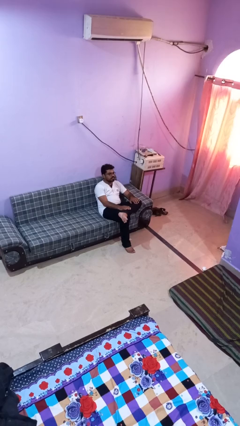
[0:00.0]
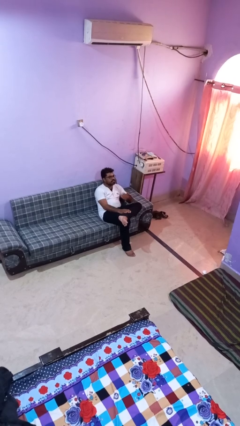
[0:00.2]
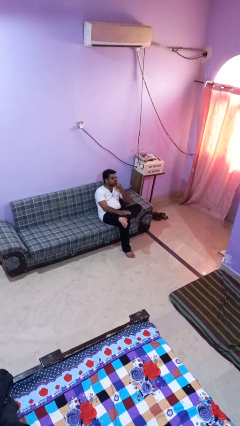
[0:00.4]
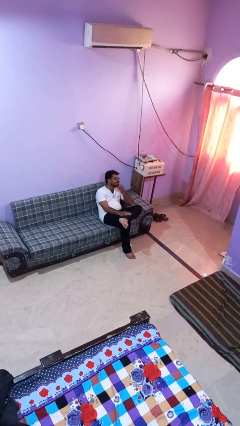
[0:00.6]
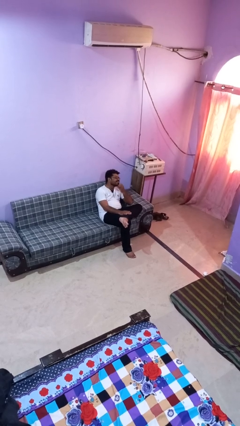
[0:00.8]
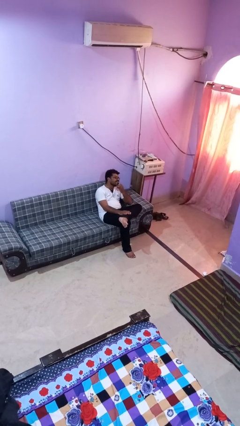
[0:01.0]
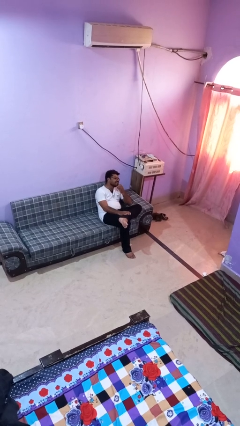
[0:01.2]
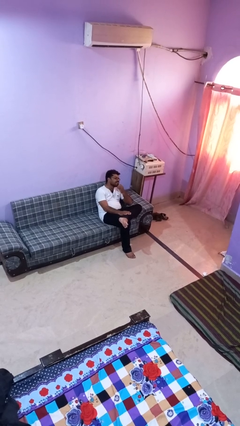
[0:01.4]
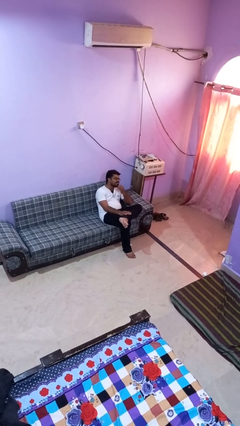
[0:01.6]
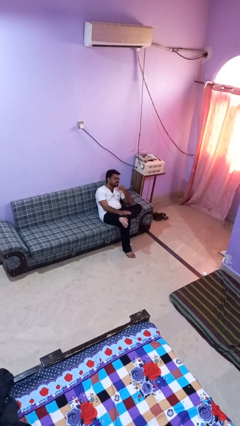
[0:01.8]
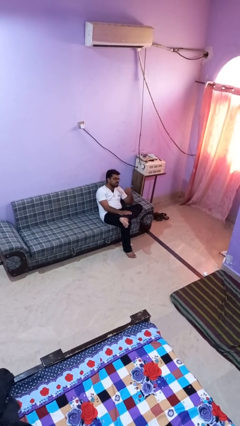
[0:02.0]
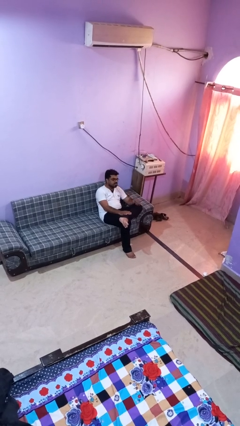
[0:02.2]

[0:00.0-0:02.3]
person strokes chin

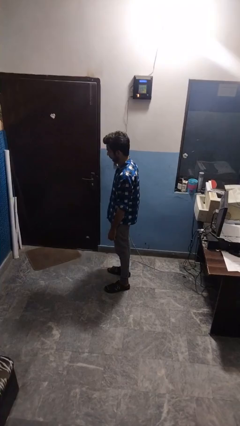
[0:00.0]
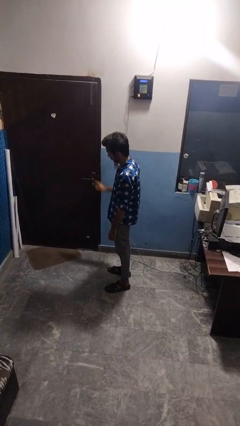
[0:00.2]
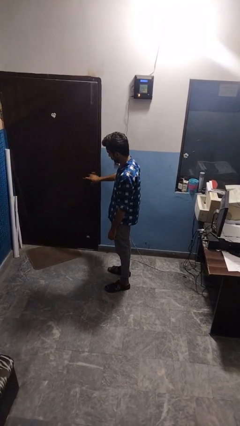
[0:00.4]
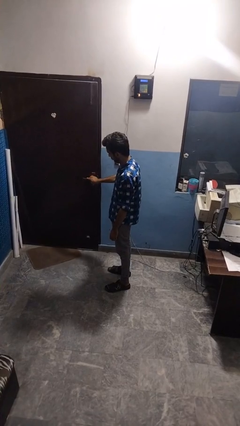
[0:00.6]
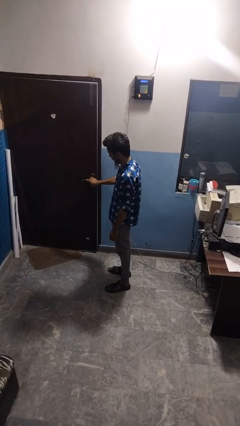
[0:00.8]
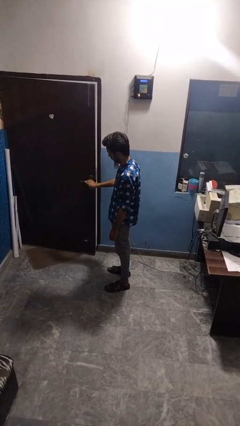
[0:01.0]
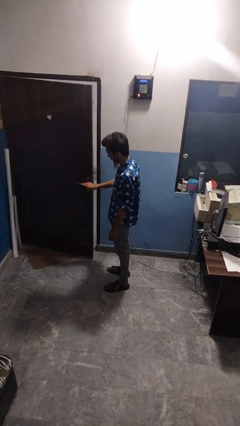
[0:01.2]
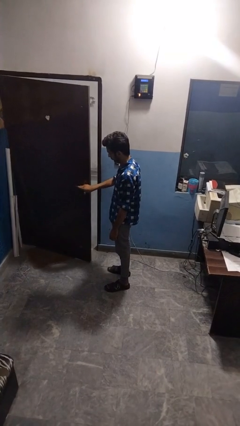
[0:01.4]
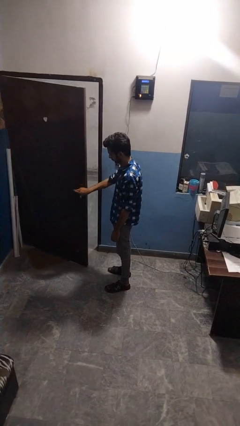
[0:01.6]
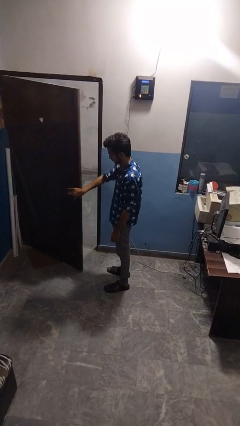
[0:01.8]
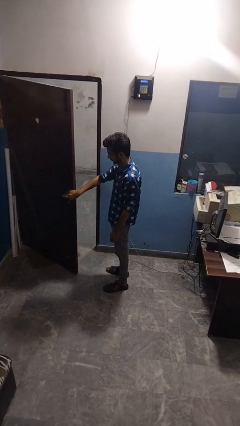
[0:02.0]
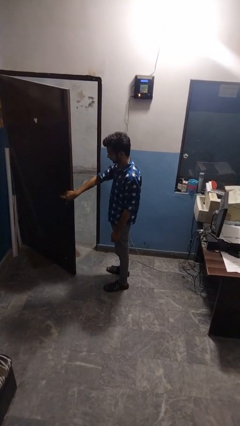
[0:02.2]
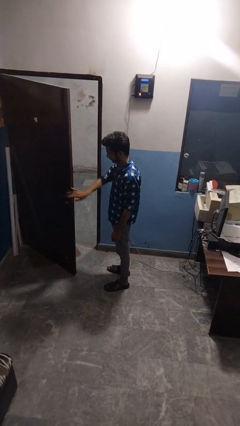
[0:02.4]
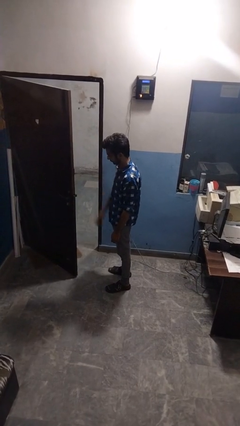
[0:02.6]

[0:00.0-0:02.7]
person opens facility door

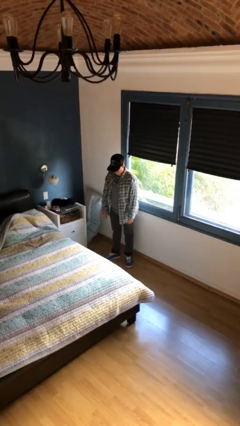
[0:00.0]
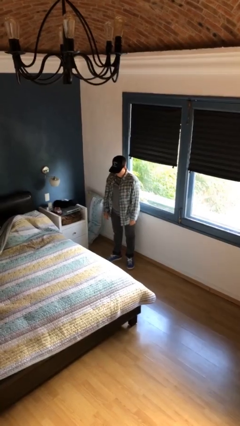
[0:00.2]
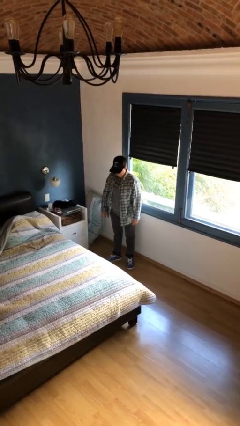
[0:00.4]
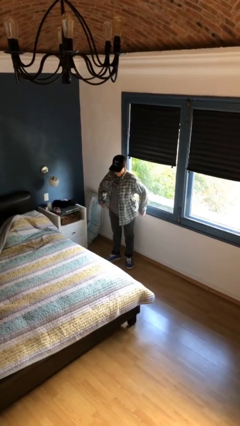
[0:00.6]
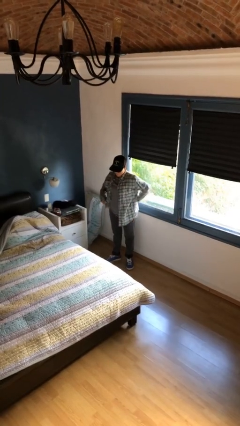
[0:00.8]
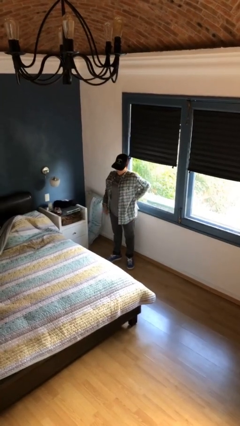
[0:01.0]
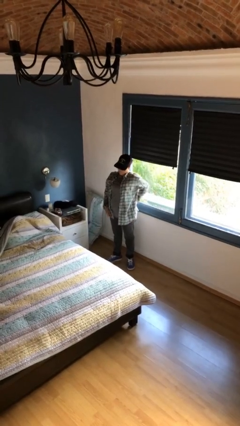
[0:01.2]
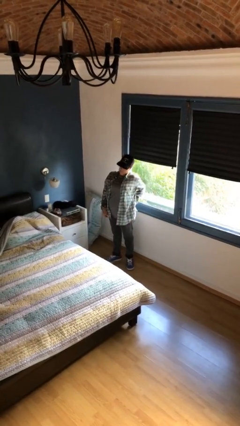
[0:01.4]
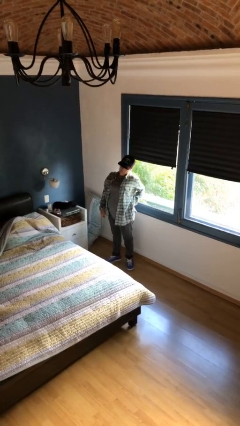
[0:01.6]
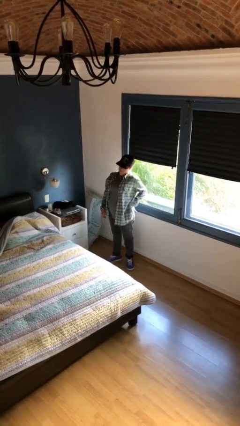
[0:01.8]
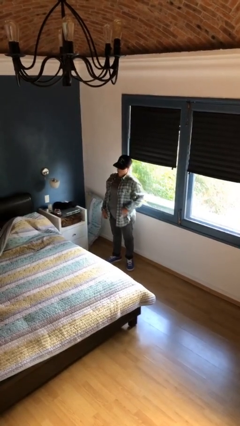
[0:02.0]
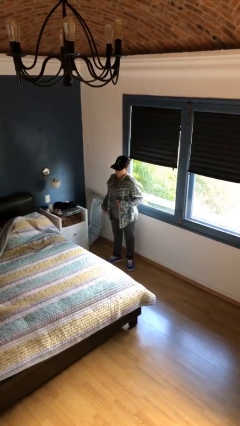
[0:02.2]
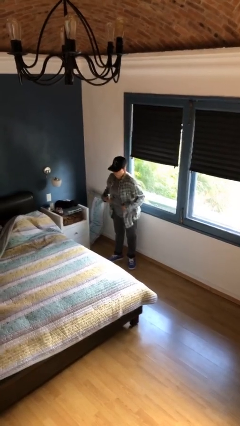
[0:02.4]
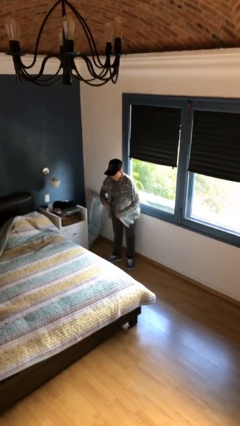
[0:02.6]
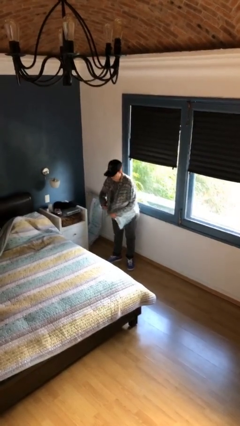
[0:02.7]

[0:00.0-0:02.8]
person stretches back

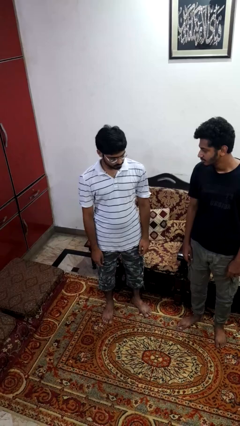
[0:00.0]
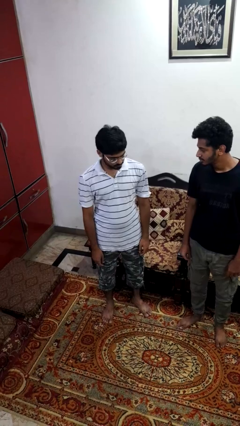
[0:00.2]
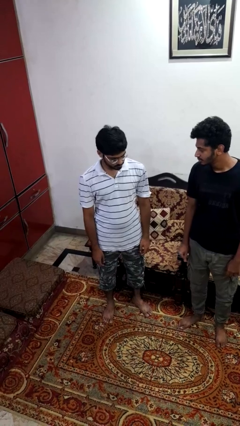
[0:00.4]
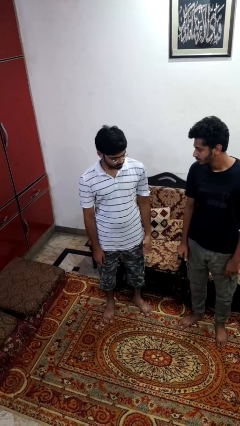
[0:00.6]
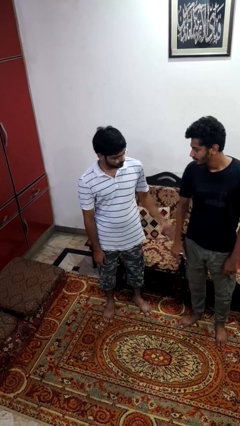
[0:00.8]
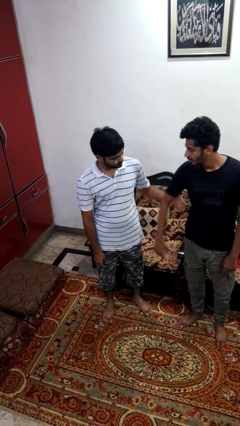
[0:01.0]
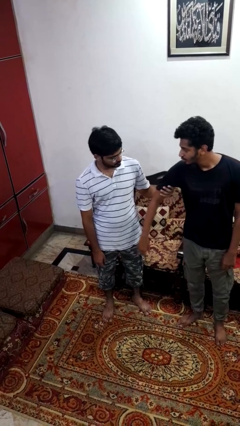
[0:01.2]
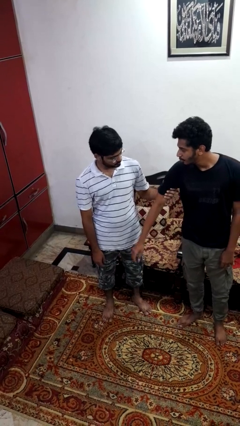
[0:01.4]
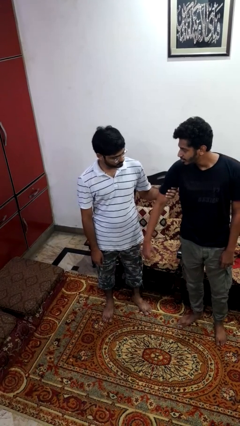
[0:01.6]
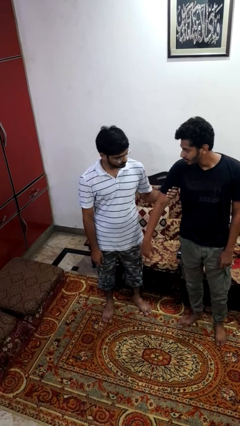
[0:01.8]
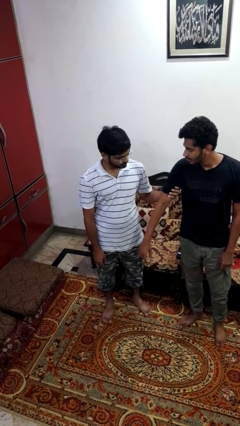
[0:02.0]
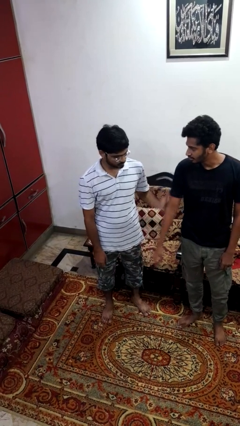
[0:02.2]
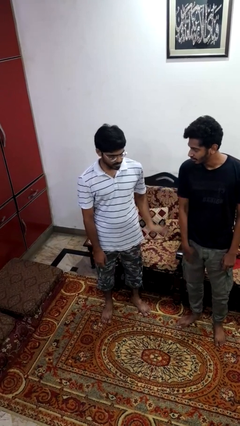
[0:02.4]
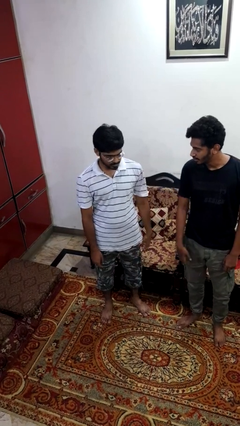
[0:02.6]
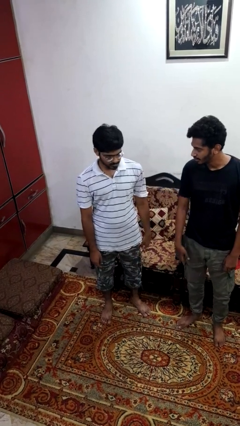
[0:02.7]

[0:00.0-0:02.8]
person grabs person by bicep

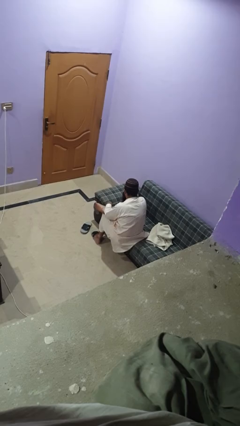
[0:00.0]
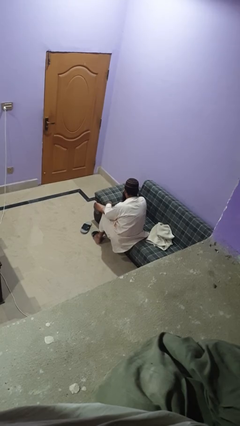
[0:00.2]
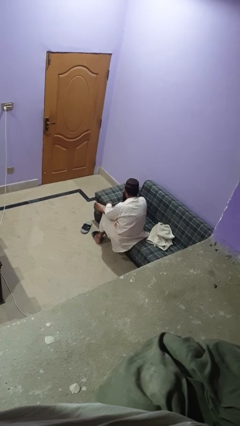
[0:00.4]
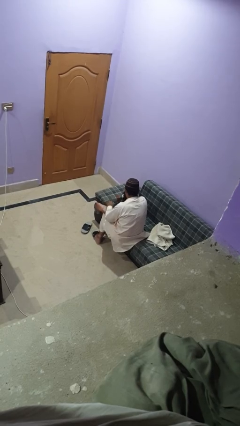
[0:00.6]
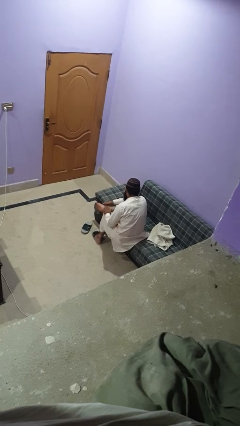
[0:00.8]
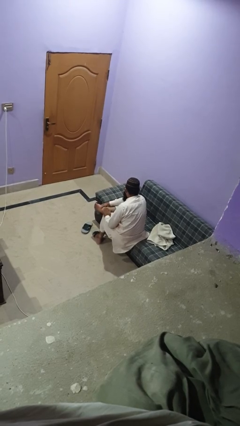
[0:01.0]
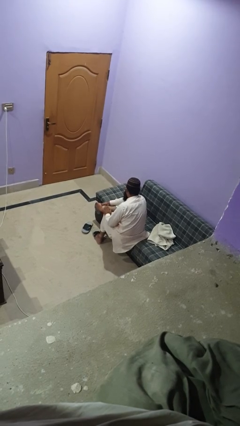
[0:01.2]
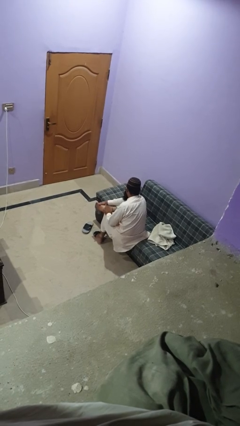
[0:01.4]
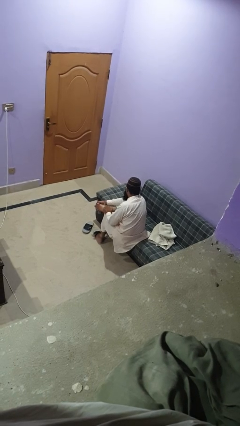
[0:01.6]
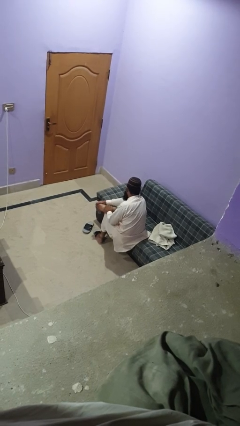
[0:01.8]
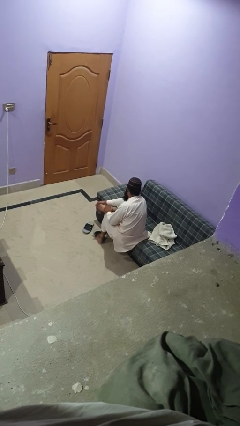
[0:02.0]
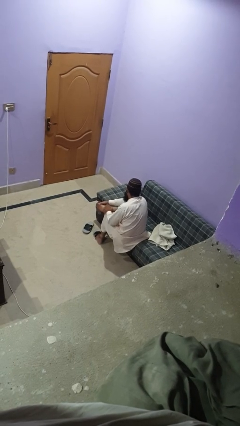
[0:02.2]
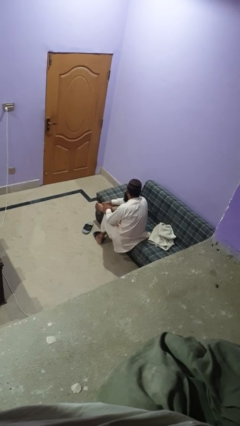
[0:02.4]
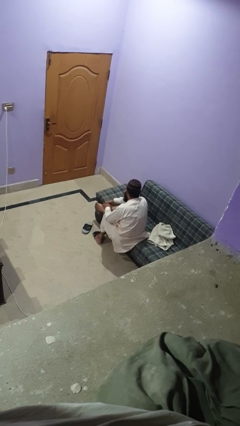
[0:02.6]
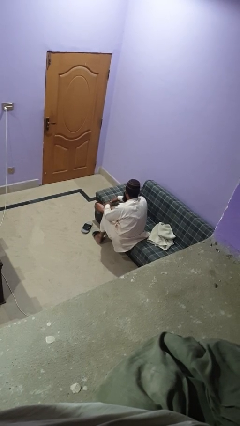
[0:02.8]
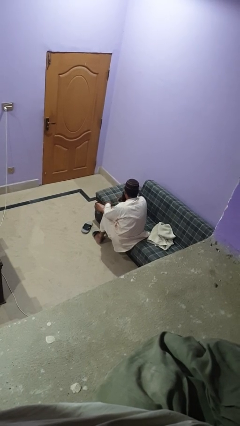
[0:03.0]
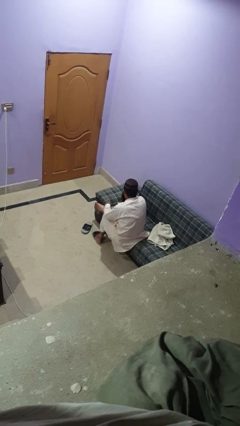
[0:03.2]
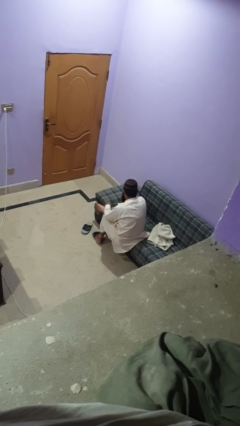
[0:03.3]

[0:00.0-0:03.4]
person rubs foot

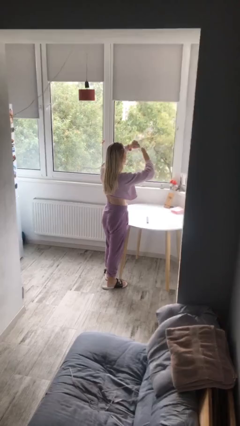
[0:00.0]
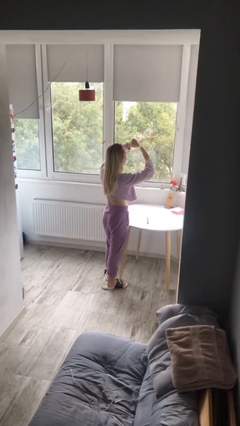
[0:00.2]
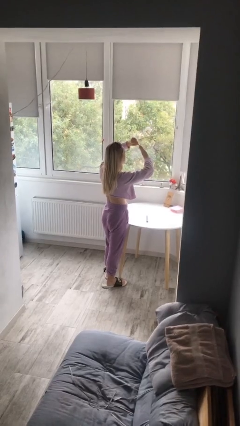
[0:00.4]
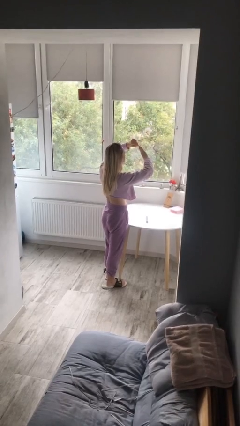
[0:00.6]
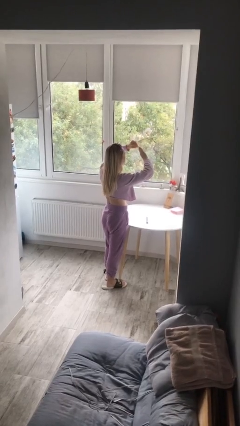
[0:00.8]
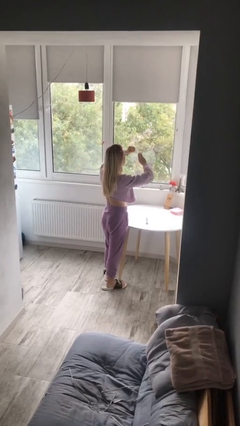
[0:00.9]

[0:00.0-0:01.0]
person clips fingernails

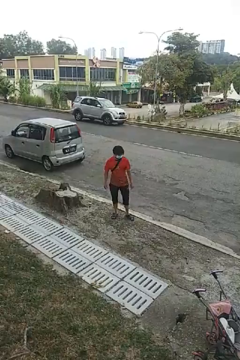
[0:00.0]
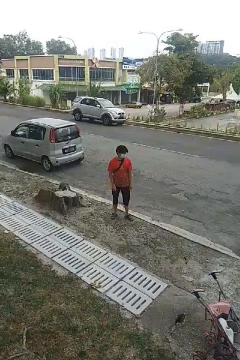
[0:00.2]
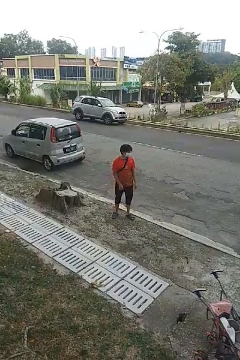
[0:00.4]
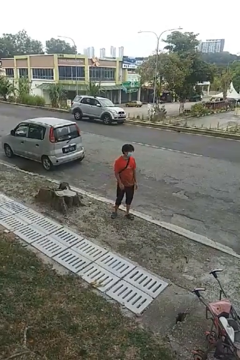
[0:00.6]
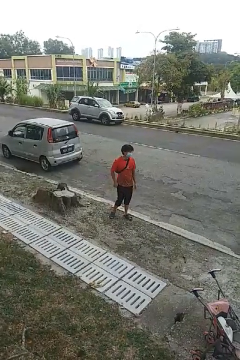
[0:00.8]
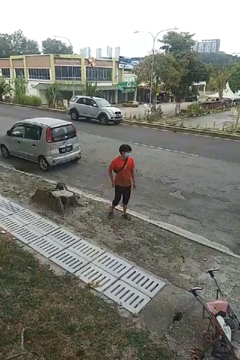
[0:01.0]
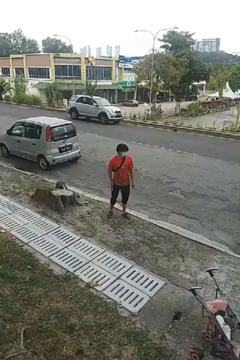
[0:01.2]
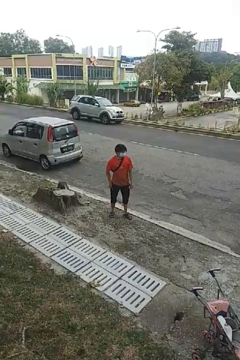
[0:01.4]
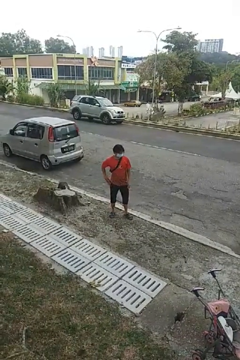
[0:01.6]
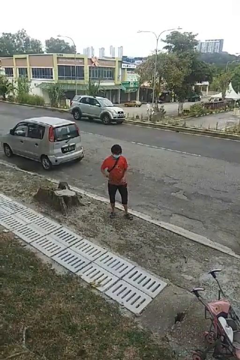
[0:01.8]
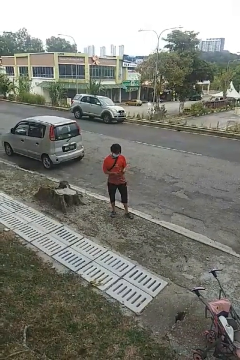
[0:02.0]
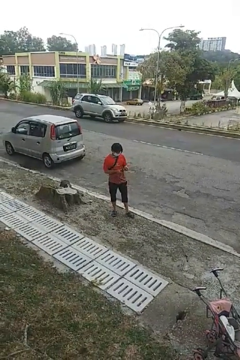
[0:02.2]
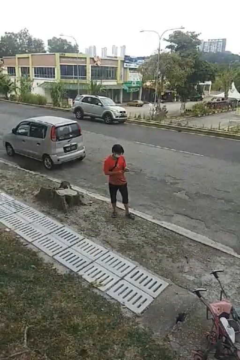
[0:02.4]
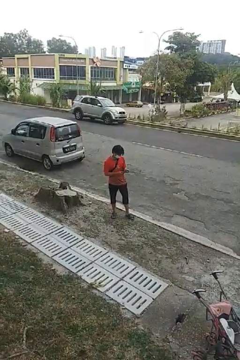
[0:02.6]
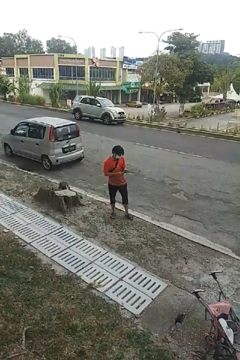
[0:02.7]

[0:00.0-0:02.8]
person takes phone from pocket
